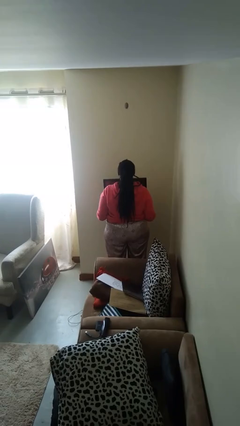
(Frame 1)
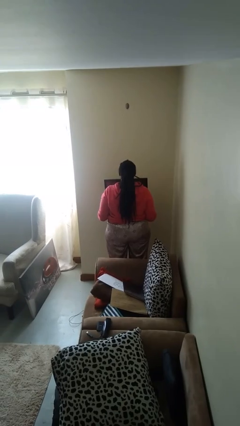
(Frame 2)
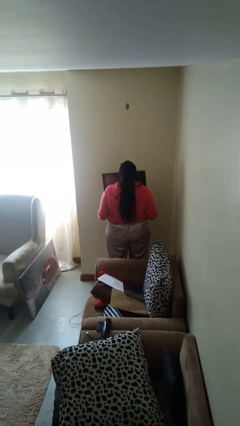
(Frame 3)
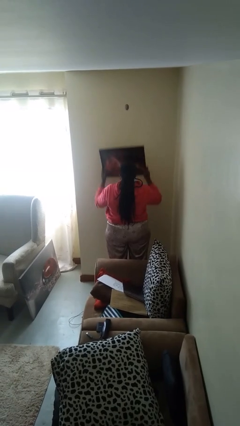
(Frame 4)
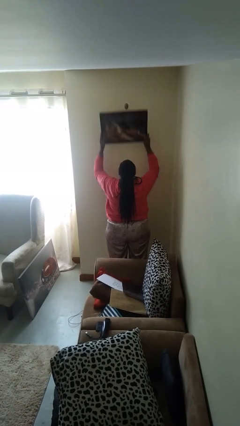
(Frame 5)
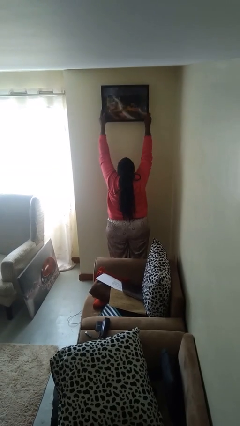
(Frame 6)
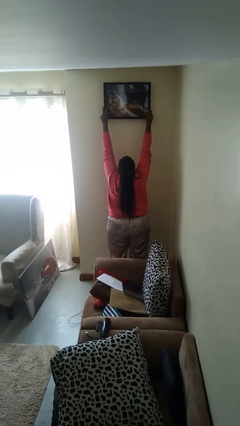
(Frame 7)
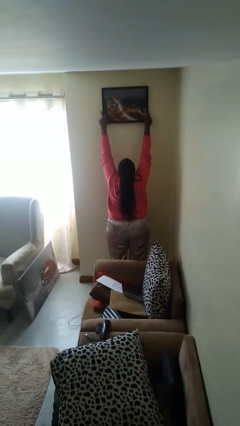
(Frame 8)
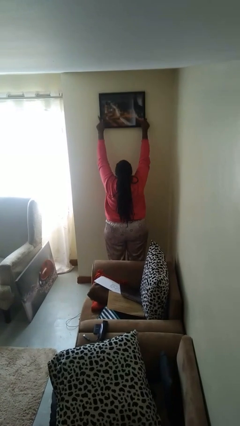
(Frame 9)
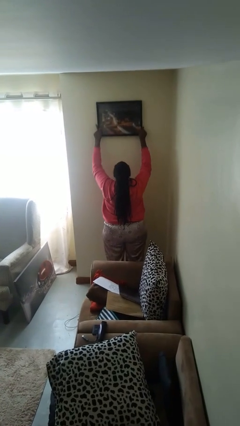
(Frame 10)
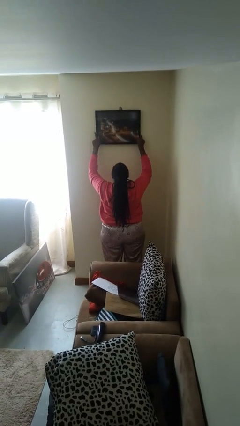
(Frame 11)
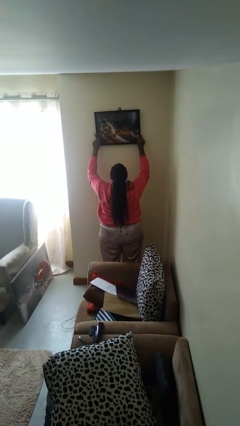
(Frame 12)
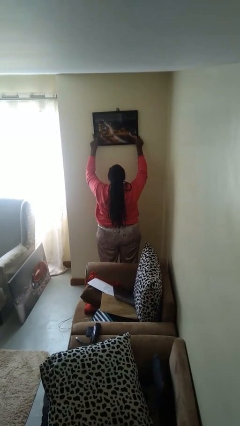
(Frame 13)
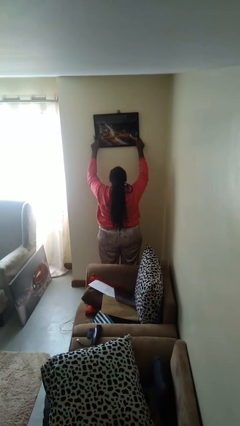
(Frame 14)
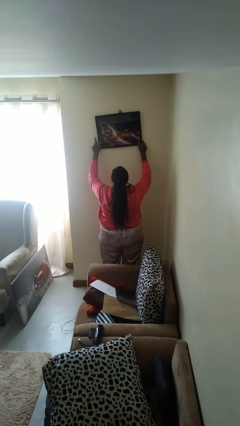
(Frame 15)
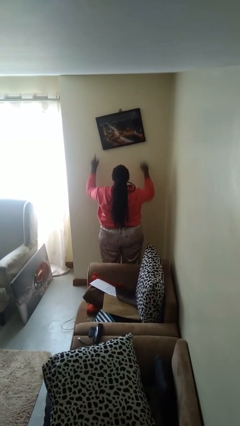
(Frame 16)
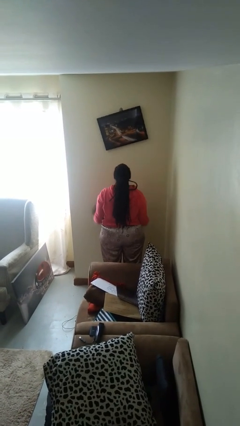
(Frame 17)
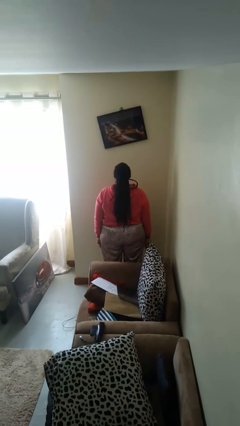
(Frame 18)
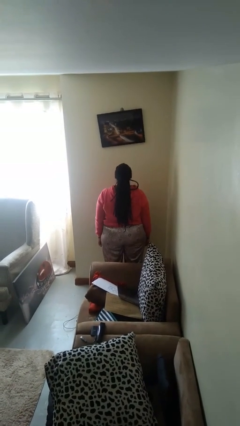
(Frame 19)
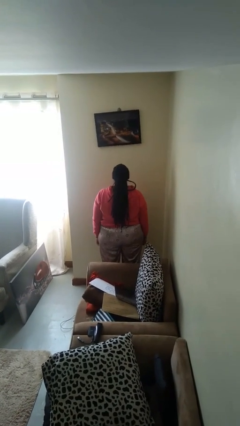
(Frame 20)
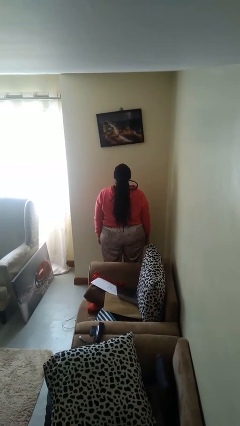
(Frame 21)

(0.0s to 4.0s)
person puts up picture frame

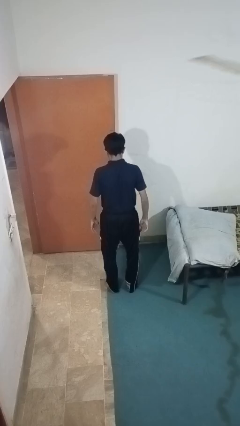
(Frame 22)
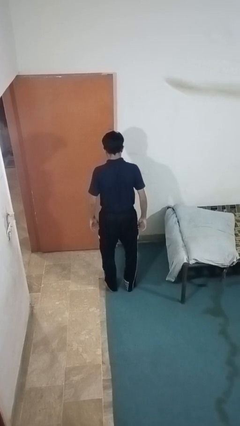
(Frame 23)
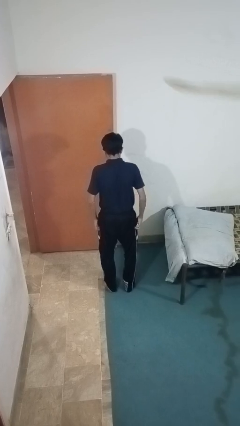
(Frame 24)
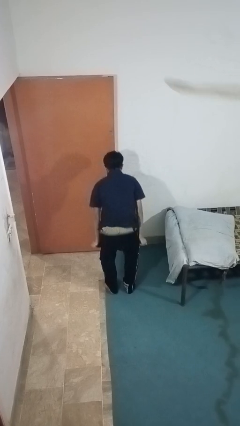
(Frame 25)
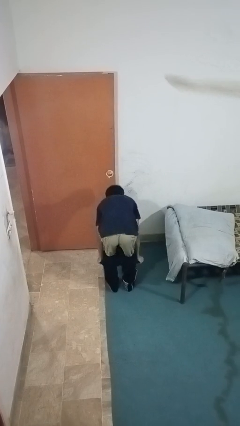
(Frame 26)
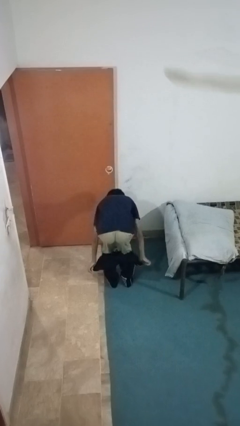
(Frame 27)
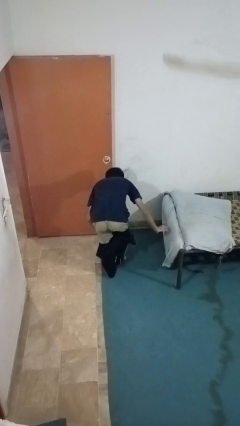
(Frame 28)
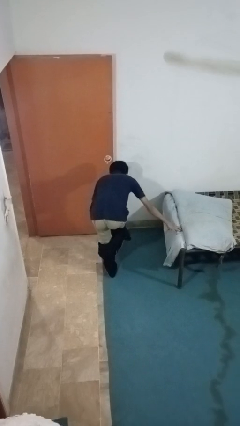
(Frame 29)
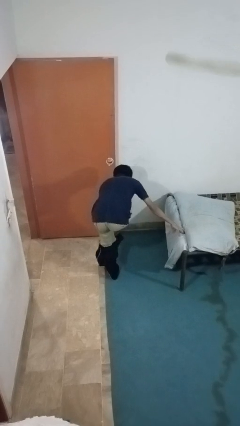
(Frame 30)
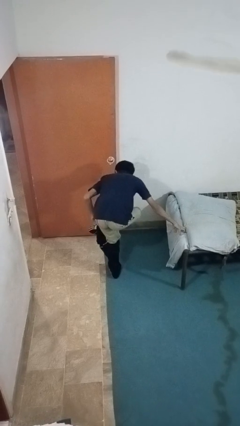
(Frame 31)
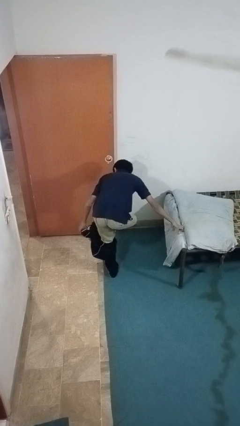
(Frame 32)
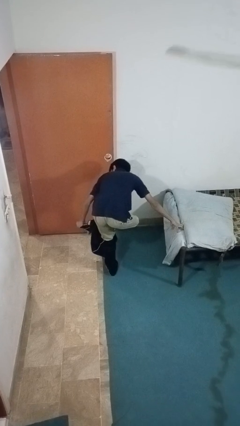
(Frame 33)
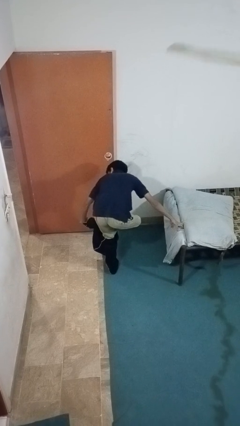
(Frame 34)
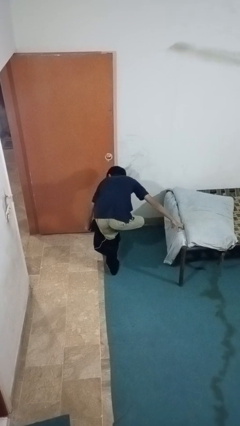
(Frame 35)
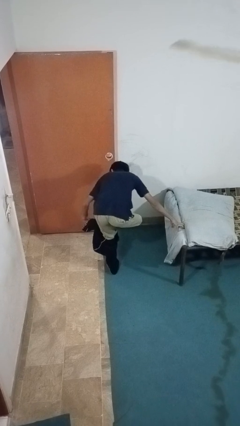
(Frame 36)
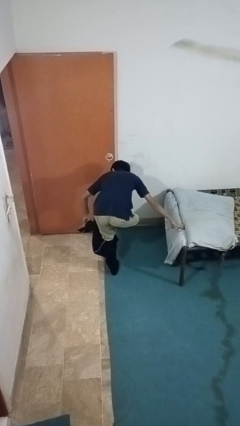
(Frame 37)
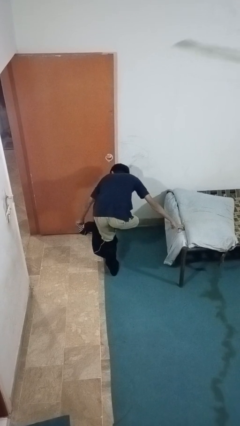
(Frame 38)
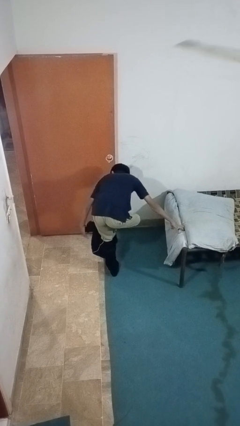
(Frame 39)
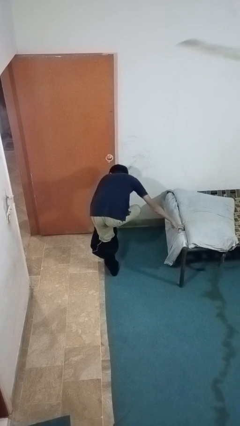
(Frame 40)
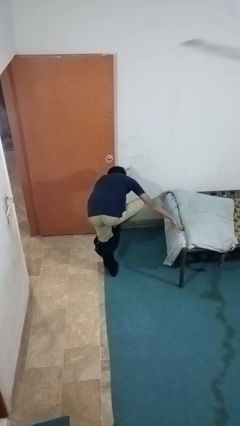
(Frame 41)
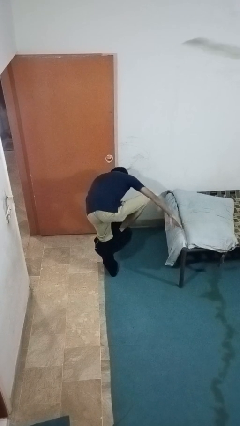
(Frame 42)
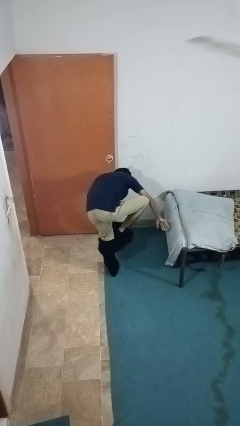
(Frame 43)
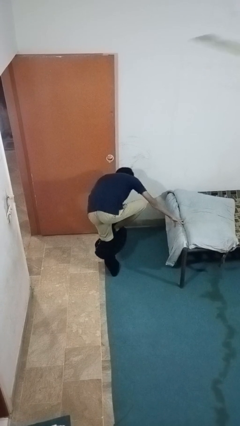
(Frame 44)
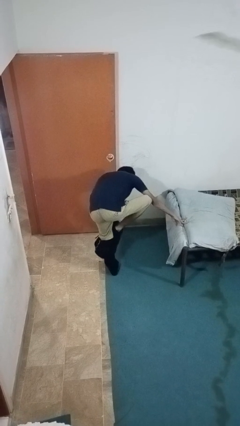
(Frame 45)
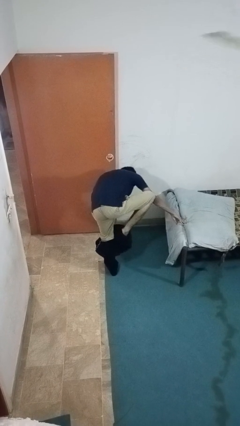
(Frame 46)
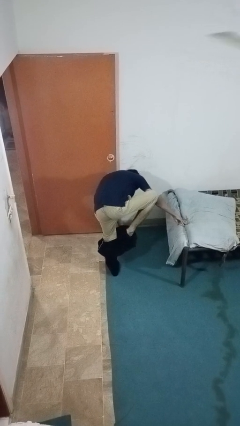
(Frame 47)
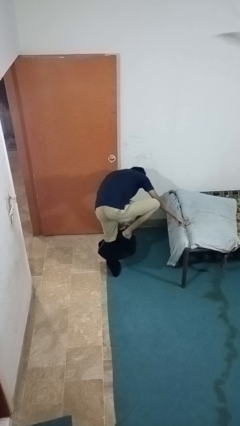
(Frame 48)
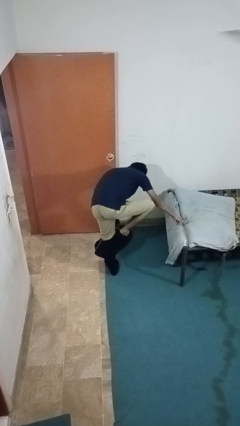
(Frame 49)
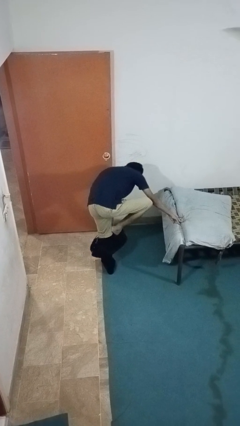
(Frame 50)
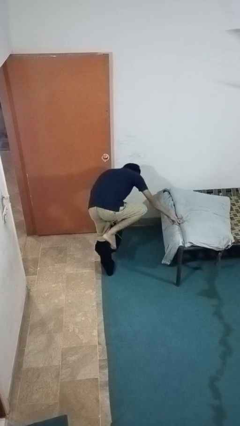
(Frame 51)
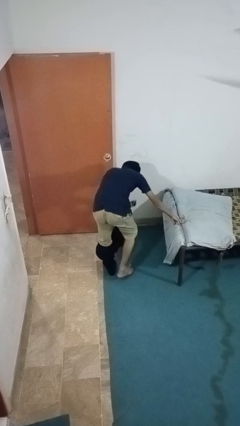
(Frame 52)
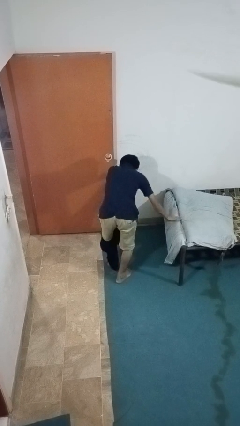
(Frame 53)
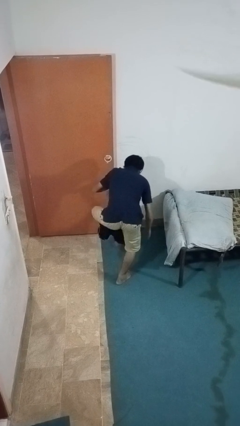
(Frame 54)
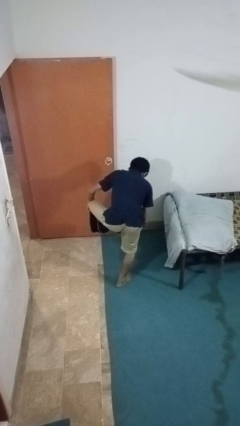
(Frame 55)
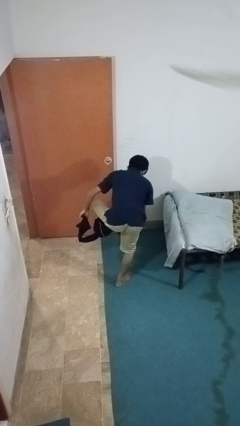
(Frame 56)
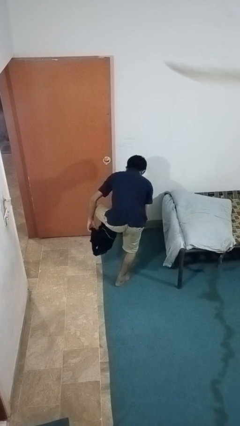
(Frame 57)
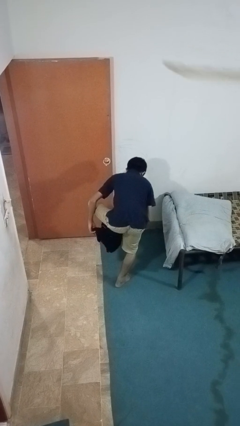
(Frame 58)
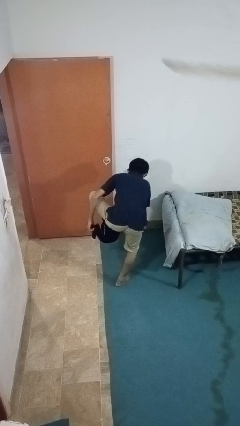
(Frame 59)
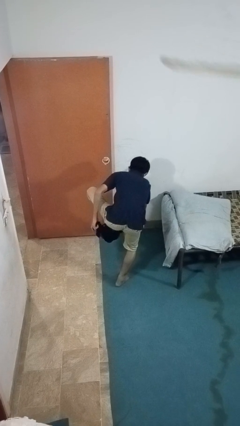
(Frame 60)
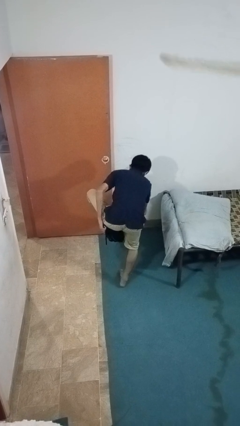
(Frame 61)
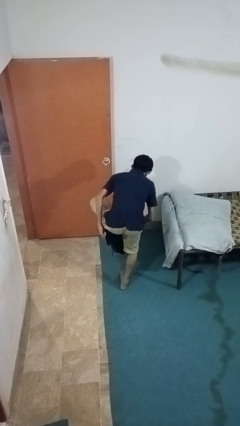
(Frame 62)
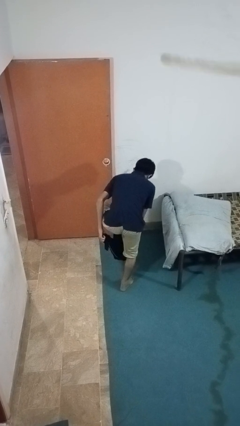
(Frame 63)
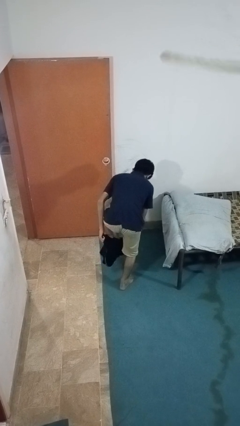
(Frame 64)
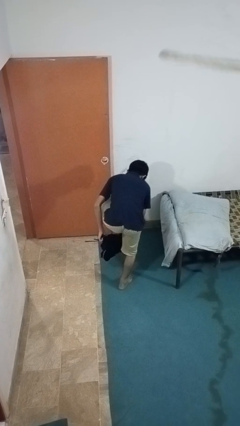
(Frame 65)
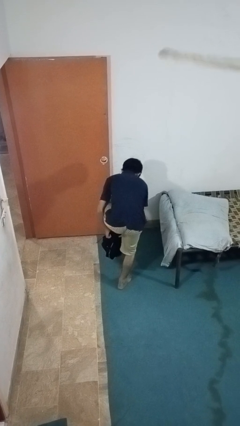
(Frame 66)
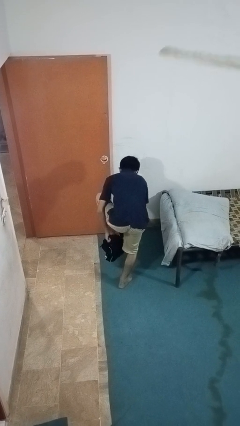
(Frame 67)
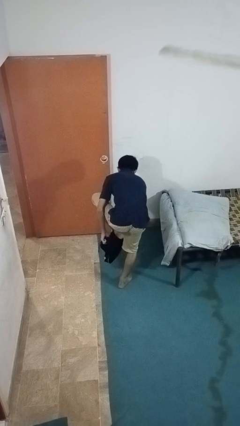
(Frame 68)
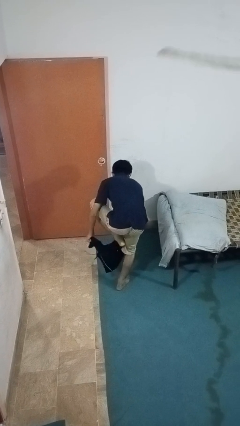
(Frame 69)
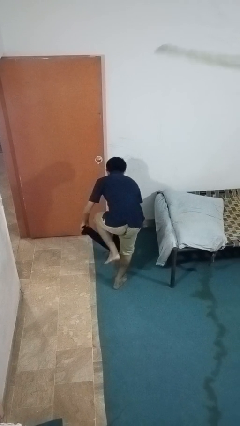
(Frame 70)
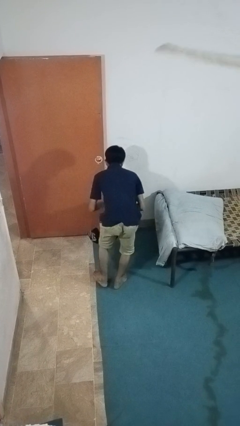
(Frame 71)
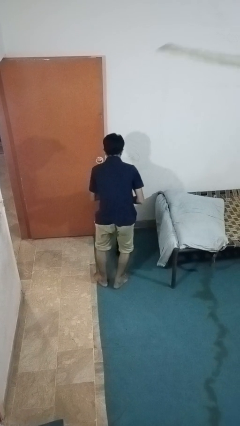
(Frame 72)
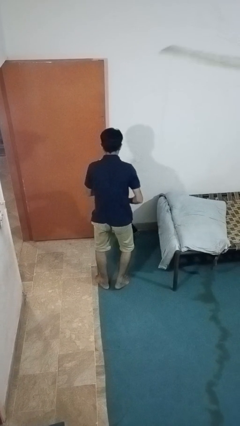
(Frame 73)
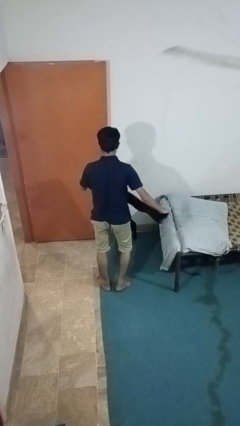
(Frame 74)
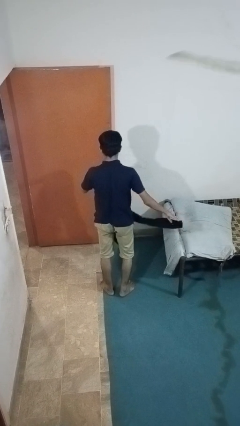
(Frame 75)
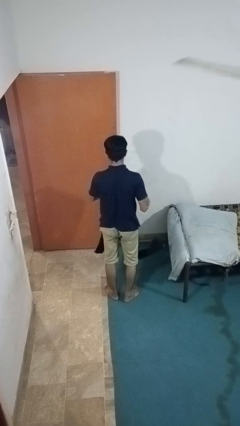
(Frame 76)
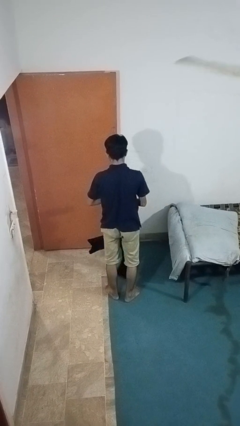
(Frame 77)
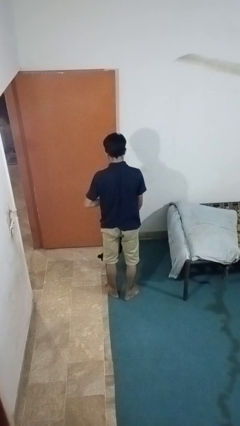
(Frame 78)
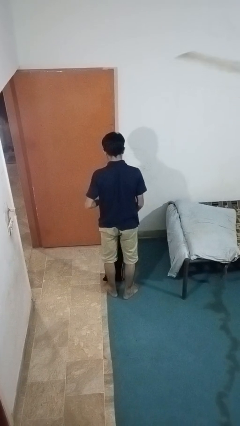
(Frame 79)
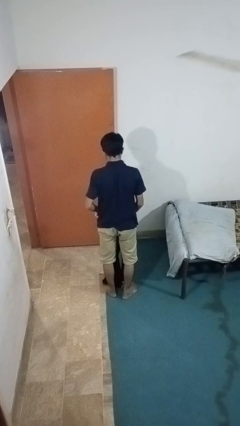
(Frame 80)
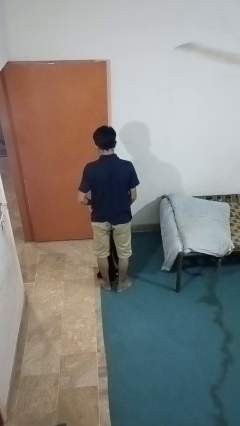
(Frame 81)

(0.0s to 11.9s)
person takes off pants

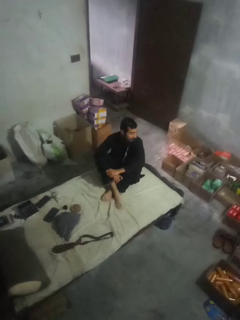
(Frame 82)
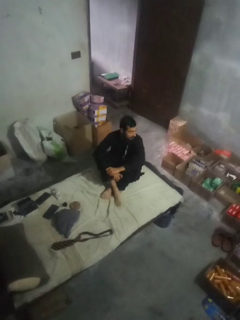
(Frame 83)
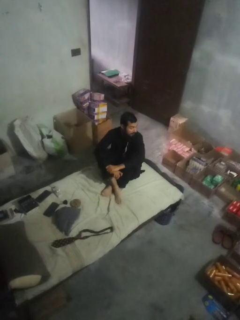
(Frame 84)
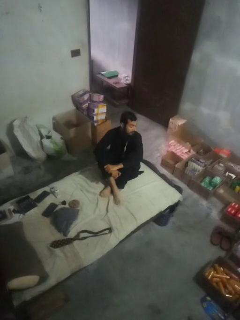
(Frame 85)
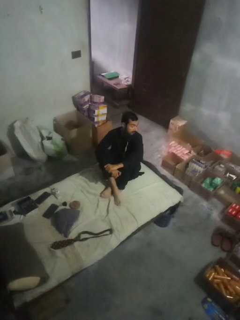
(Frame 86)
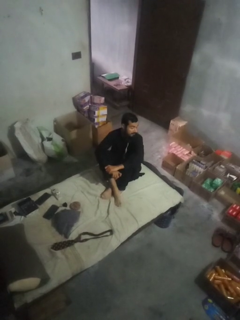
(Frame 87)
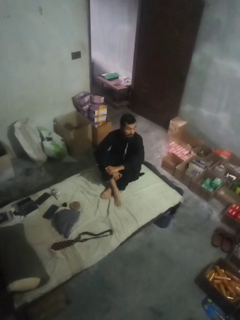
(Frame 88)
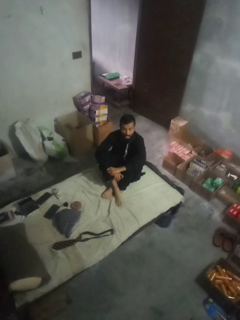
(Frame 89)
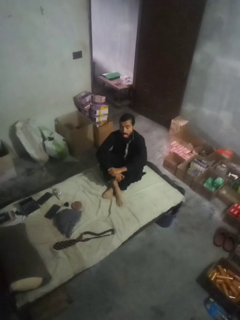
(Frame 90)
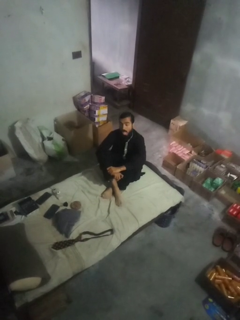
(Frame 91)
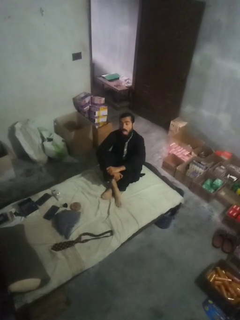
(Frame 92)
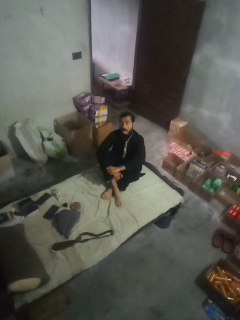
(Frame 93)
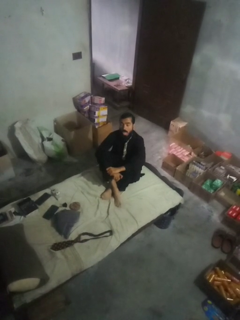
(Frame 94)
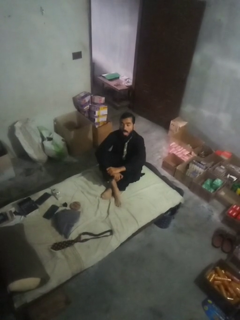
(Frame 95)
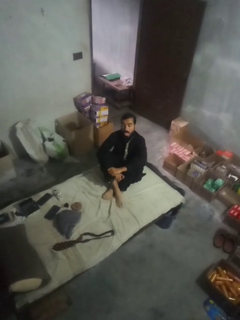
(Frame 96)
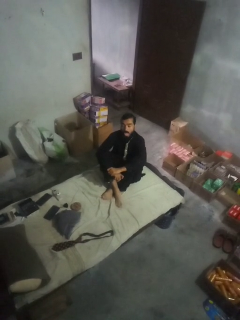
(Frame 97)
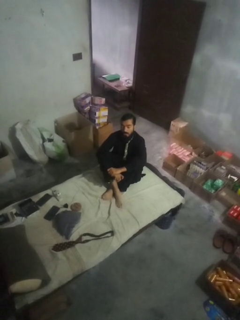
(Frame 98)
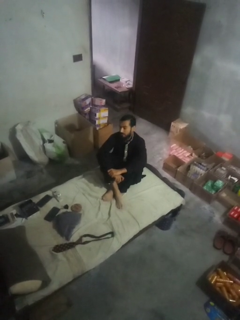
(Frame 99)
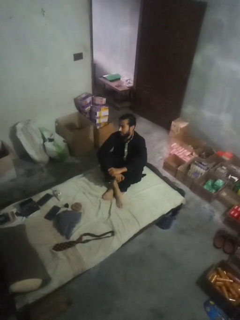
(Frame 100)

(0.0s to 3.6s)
person sticks out tongue
